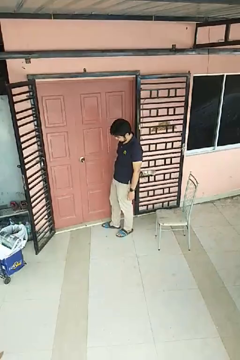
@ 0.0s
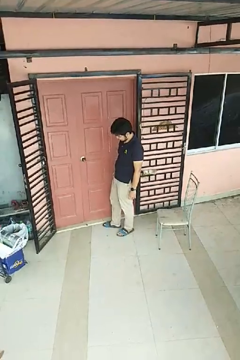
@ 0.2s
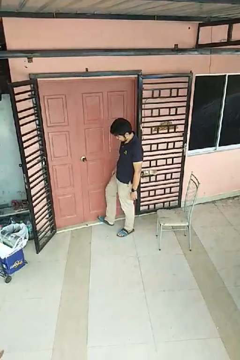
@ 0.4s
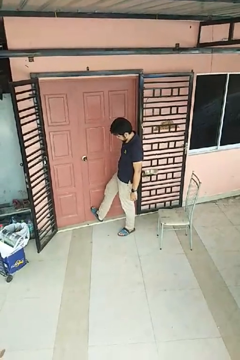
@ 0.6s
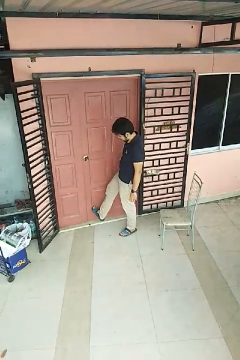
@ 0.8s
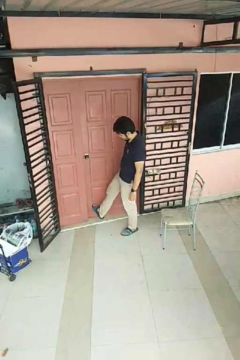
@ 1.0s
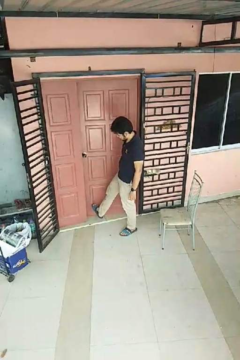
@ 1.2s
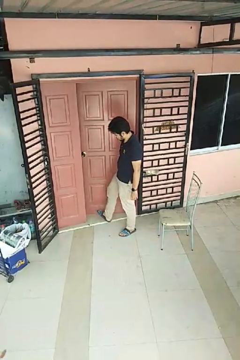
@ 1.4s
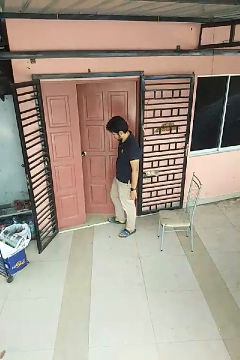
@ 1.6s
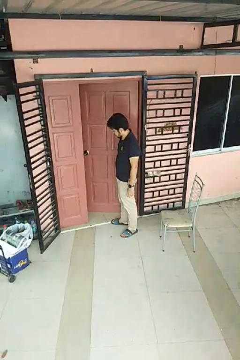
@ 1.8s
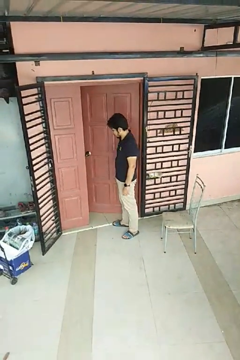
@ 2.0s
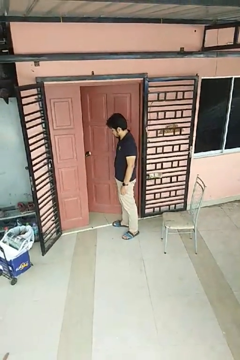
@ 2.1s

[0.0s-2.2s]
person opens facility door

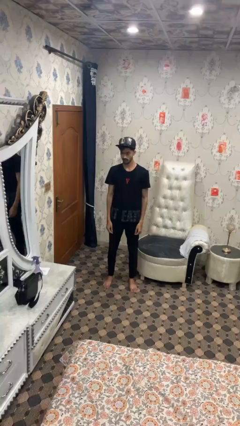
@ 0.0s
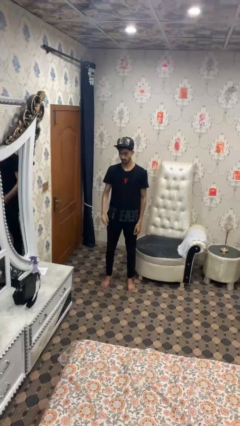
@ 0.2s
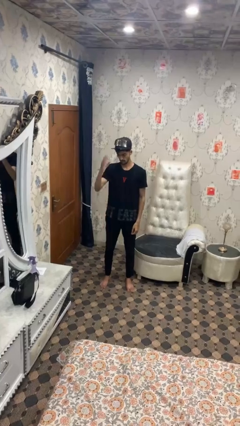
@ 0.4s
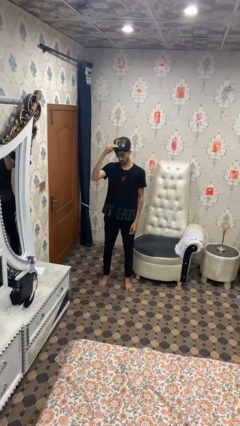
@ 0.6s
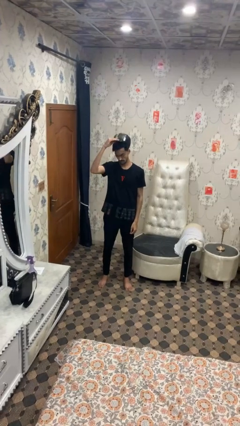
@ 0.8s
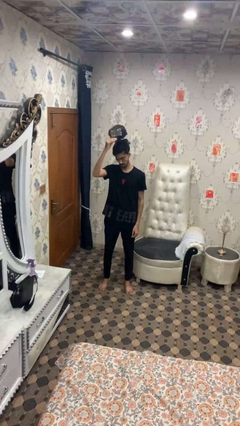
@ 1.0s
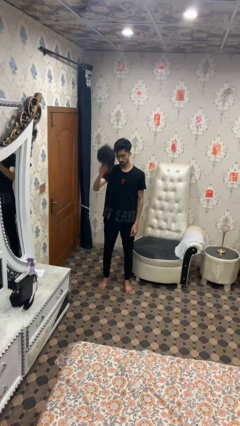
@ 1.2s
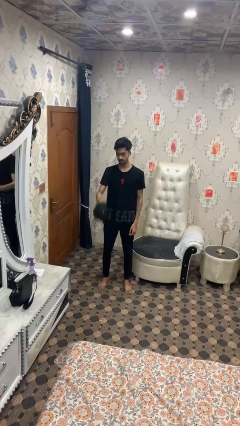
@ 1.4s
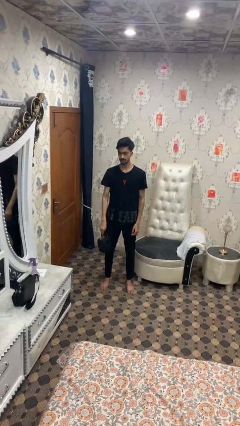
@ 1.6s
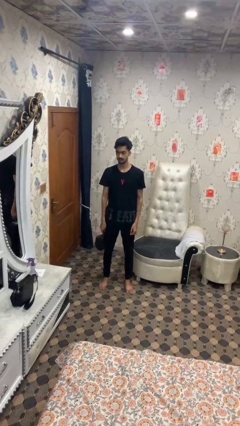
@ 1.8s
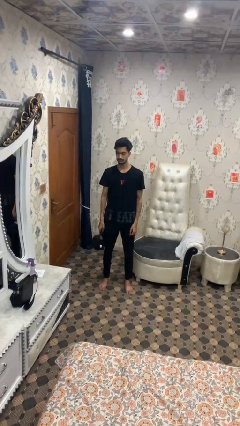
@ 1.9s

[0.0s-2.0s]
person takes off hat

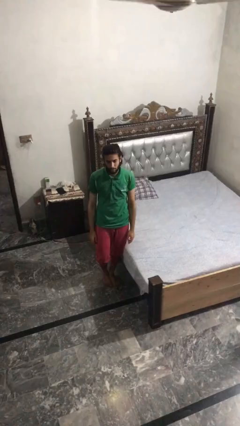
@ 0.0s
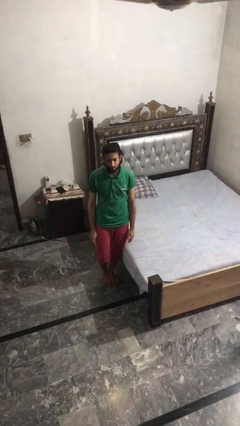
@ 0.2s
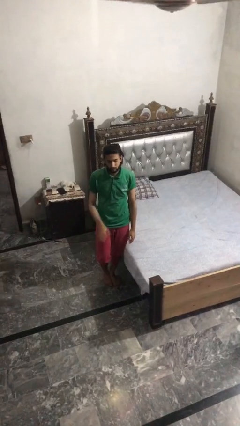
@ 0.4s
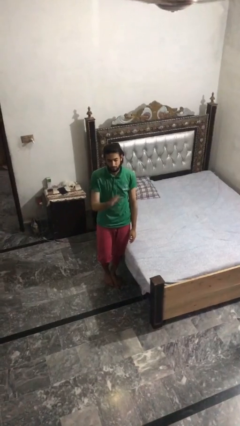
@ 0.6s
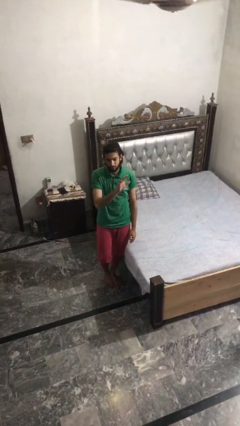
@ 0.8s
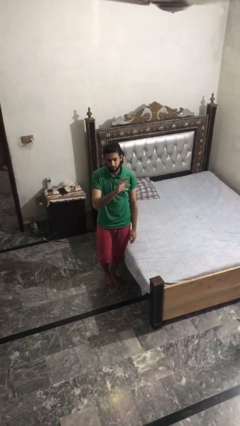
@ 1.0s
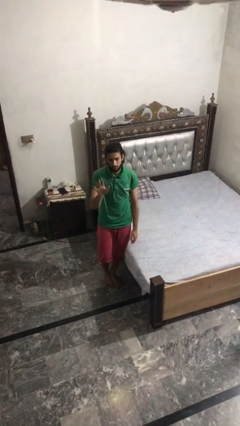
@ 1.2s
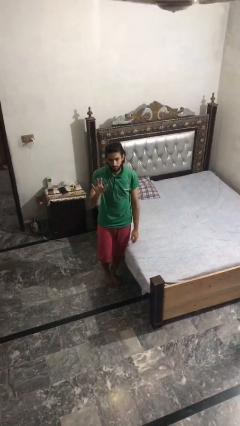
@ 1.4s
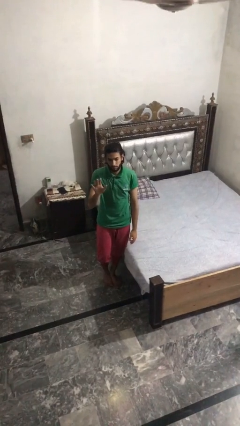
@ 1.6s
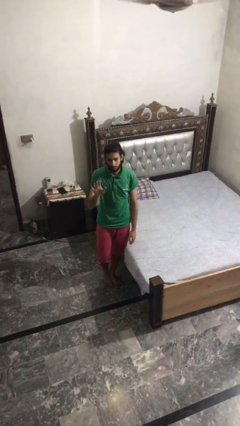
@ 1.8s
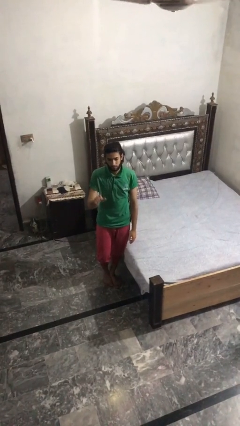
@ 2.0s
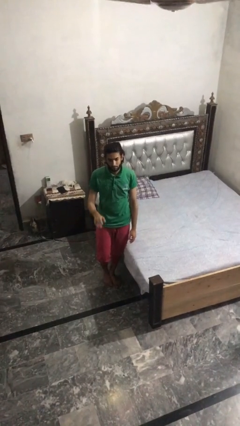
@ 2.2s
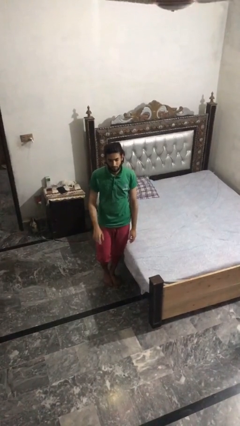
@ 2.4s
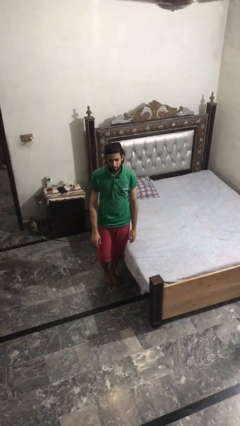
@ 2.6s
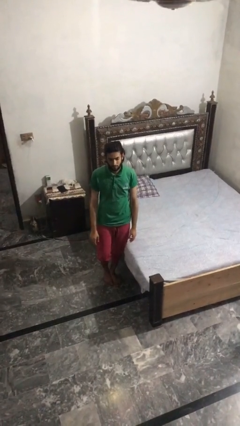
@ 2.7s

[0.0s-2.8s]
person gestures swipe right

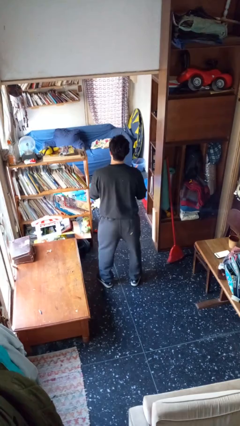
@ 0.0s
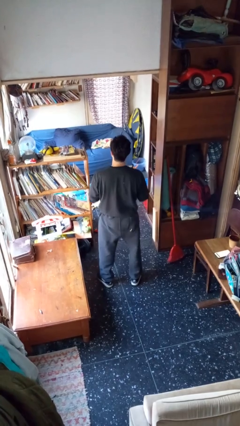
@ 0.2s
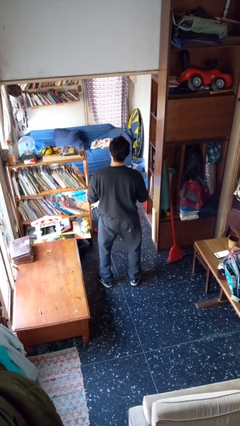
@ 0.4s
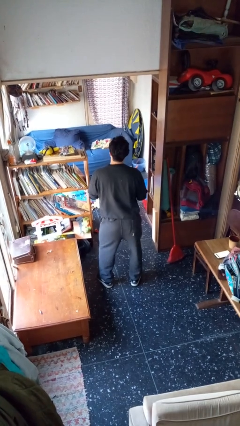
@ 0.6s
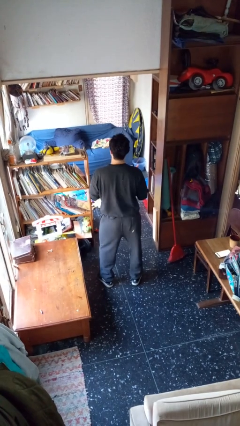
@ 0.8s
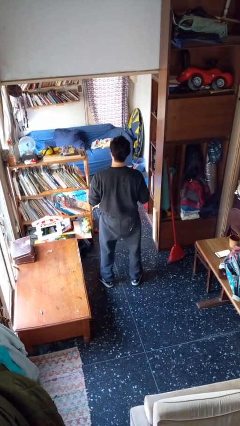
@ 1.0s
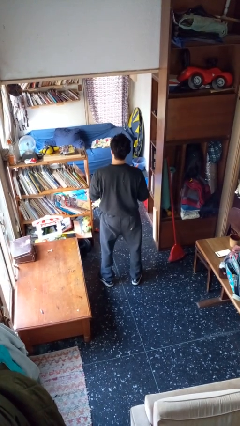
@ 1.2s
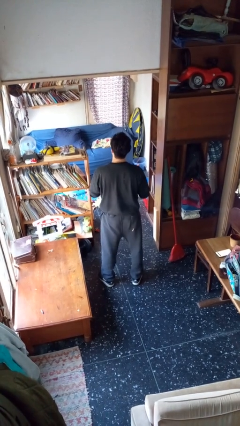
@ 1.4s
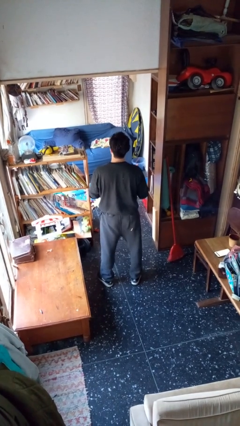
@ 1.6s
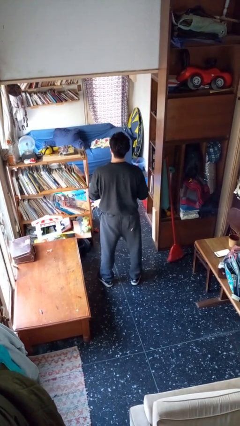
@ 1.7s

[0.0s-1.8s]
person wiggles hips

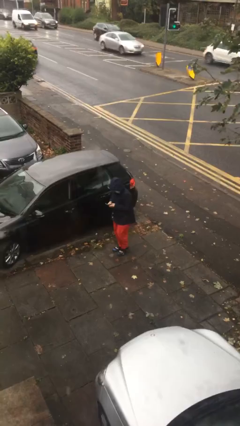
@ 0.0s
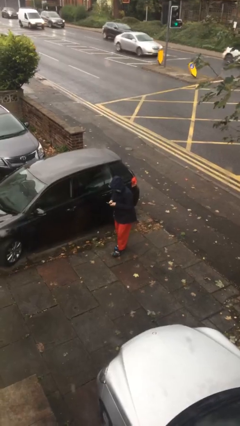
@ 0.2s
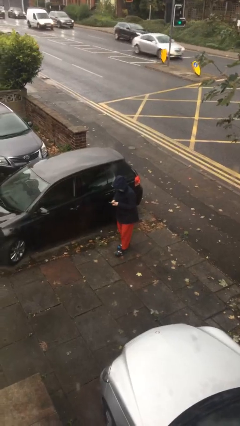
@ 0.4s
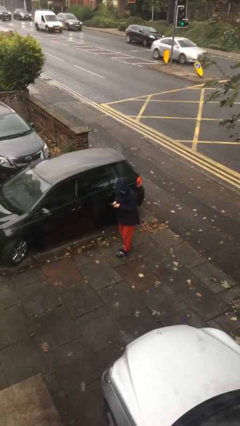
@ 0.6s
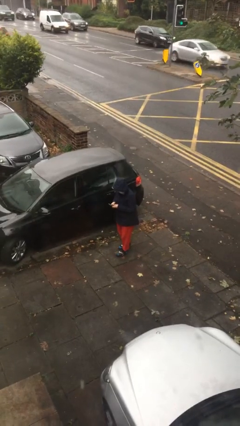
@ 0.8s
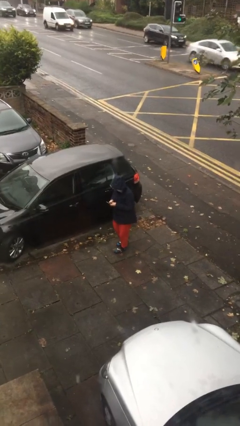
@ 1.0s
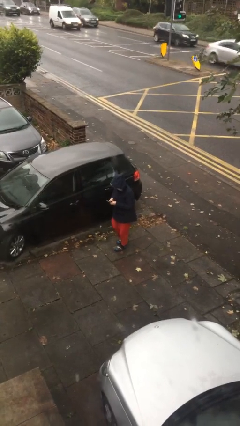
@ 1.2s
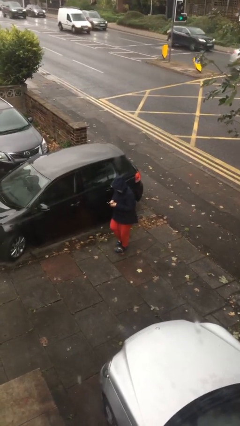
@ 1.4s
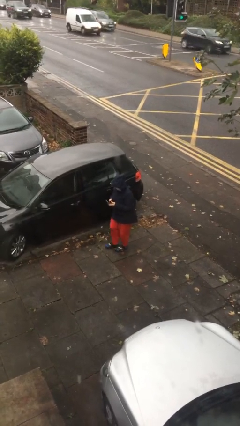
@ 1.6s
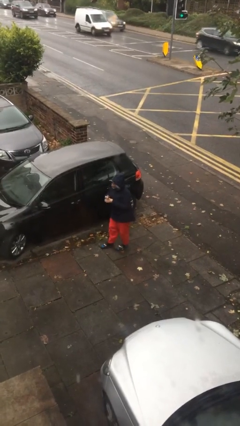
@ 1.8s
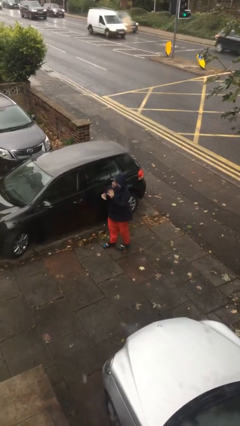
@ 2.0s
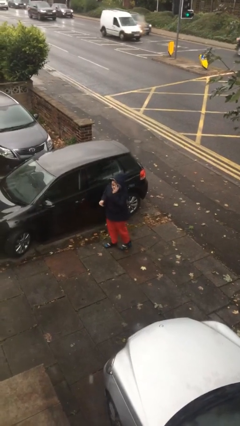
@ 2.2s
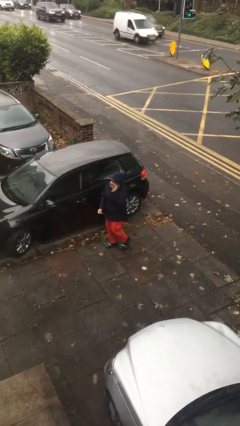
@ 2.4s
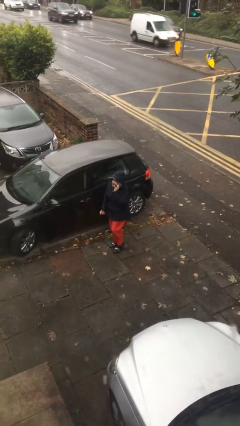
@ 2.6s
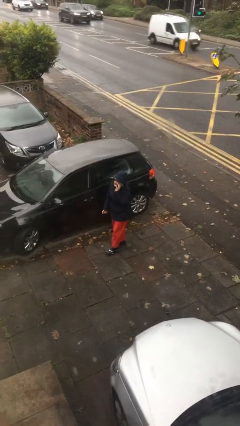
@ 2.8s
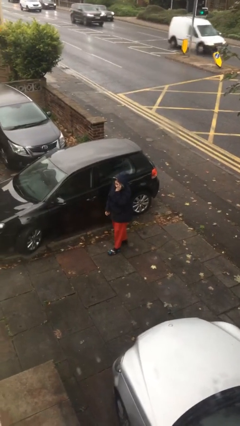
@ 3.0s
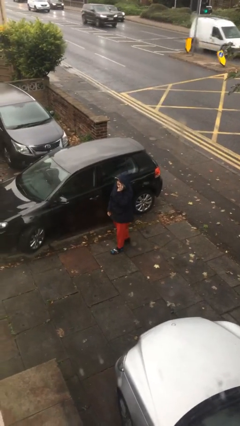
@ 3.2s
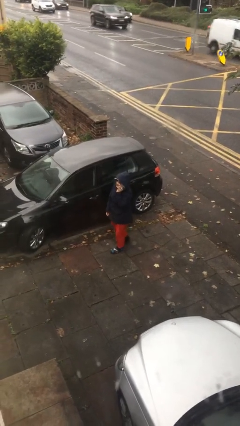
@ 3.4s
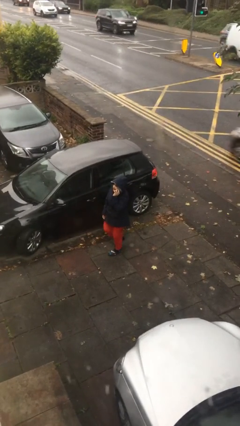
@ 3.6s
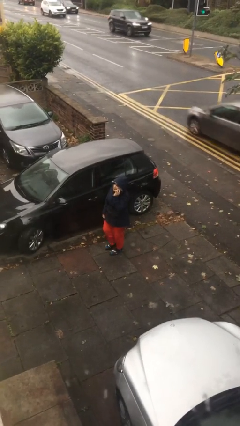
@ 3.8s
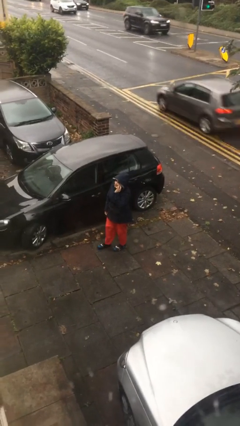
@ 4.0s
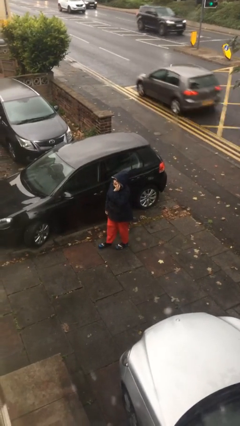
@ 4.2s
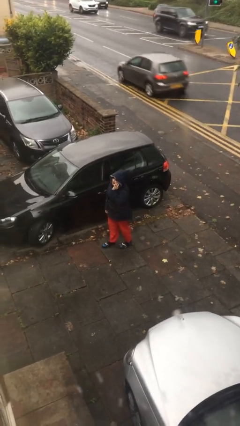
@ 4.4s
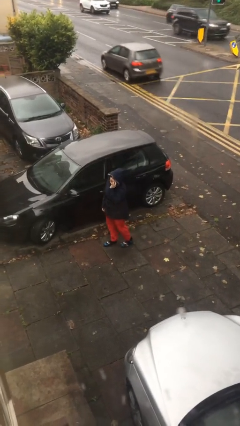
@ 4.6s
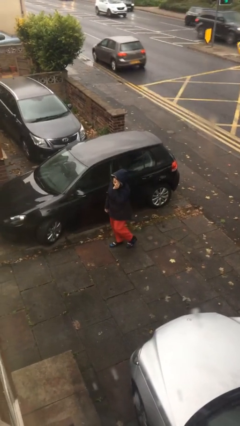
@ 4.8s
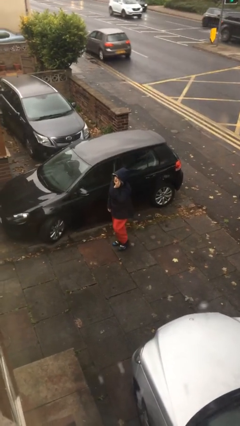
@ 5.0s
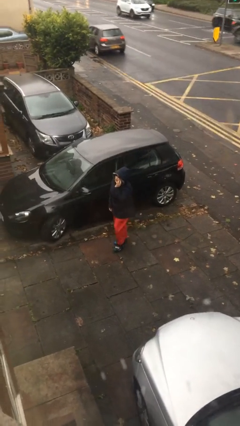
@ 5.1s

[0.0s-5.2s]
person talks on phone

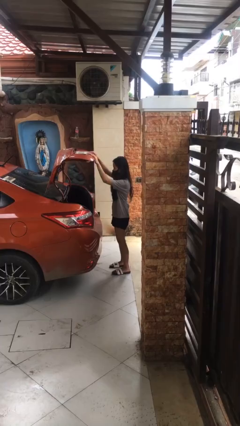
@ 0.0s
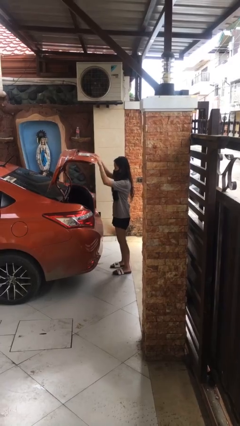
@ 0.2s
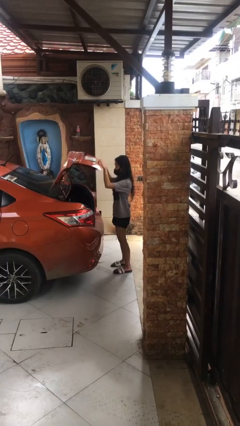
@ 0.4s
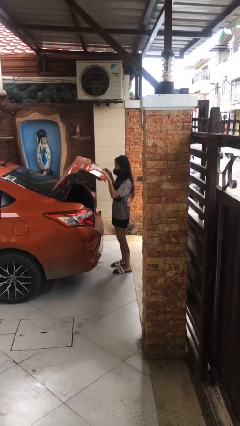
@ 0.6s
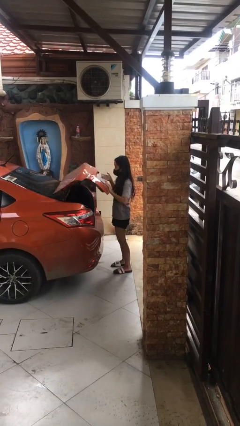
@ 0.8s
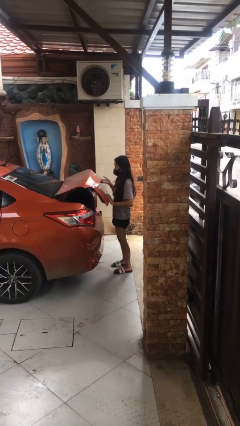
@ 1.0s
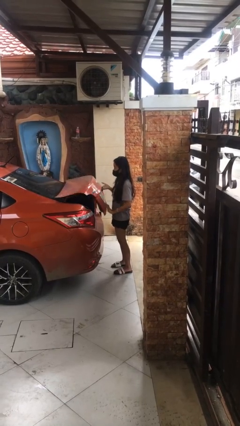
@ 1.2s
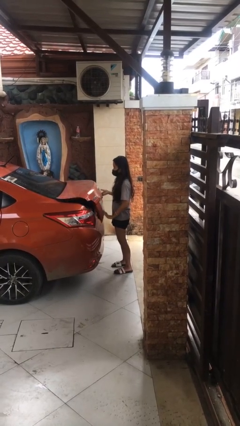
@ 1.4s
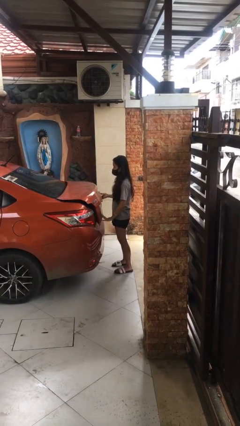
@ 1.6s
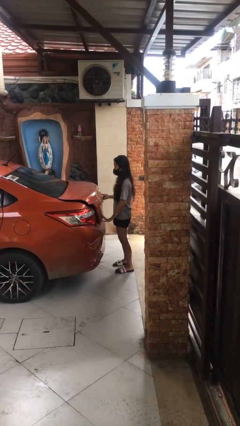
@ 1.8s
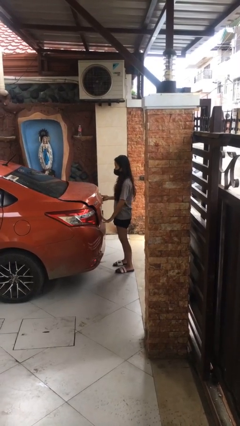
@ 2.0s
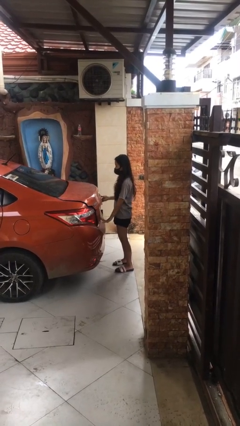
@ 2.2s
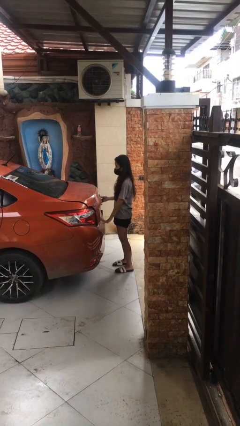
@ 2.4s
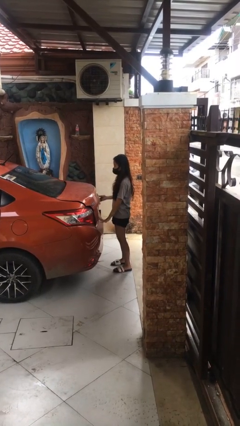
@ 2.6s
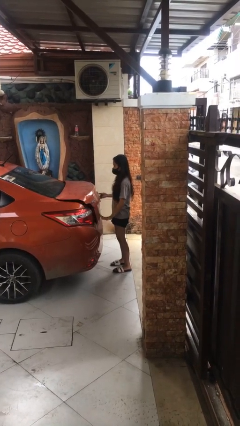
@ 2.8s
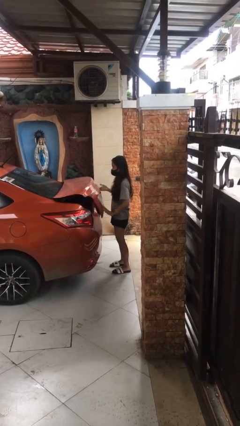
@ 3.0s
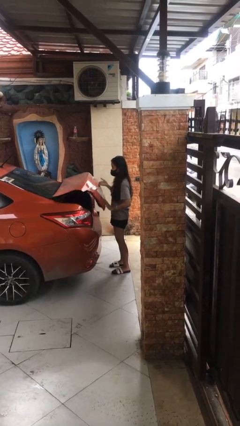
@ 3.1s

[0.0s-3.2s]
person closes car trunk

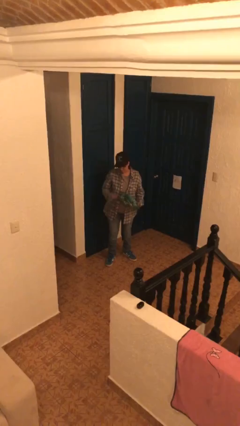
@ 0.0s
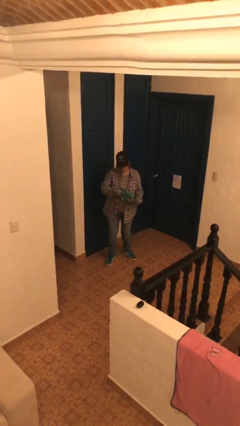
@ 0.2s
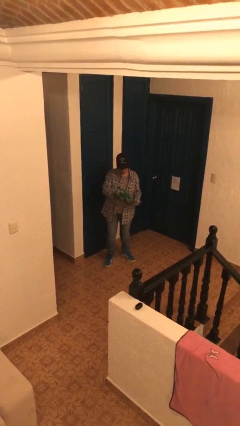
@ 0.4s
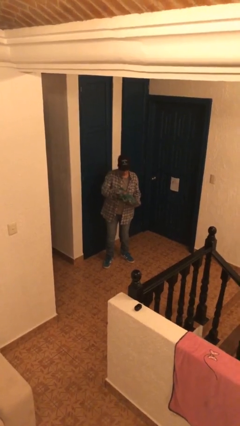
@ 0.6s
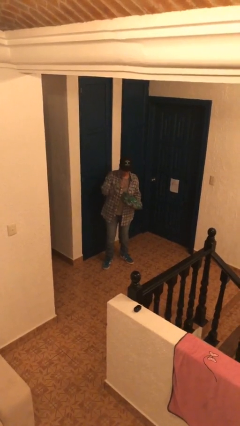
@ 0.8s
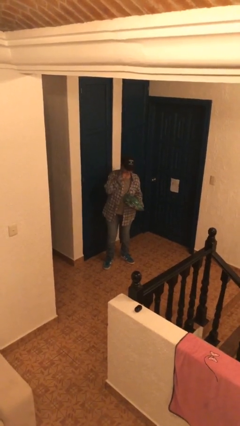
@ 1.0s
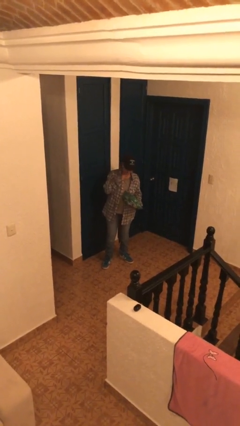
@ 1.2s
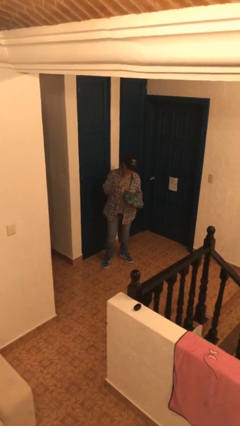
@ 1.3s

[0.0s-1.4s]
person eats snack from bag
